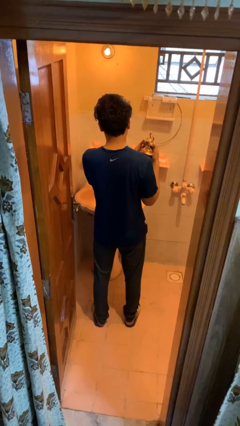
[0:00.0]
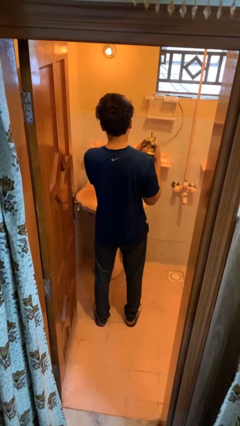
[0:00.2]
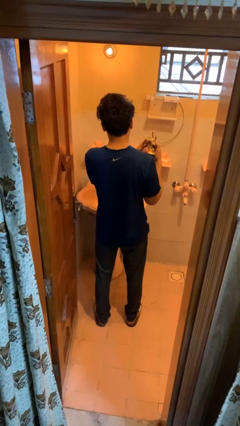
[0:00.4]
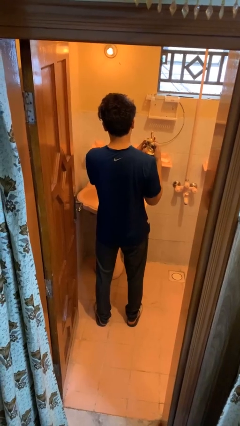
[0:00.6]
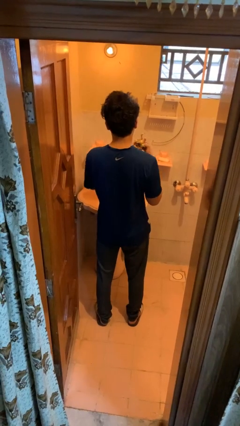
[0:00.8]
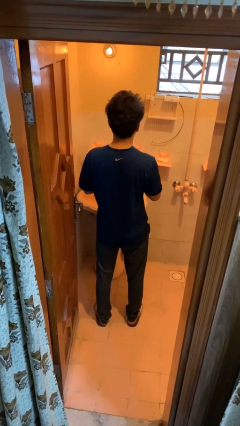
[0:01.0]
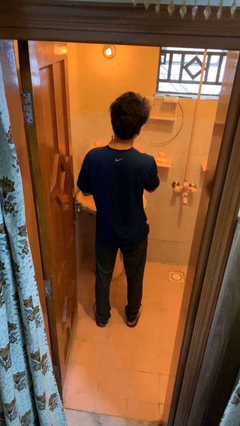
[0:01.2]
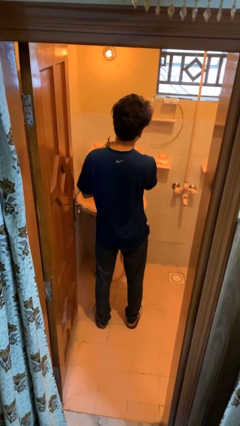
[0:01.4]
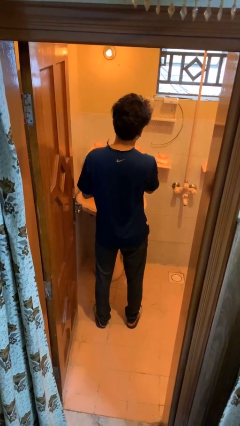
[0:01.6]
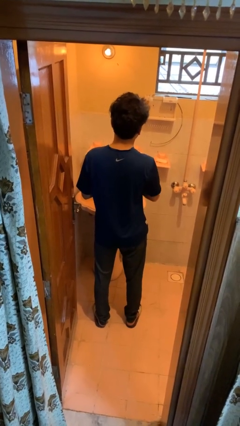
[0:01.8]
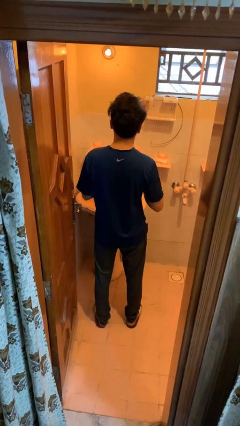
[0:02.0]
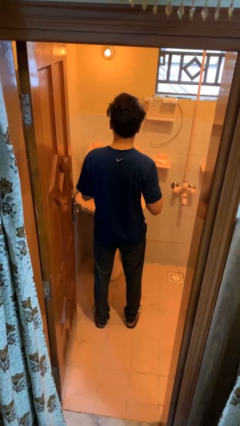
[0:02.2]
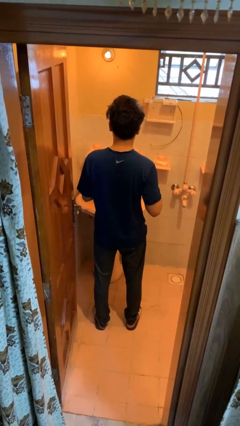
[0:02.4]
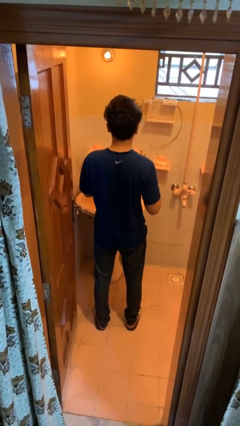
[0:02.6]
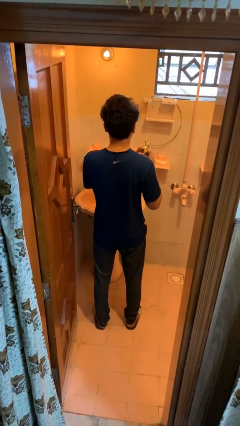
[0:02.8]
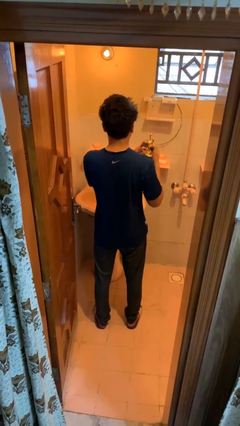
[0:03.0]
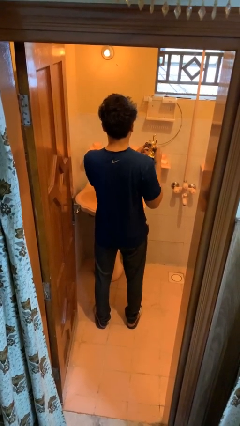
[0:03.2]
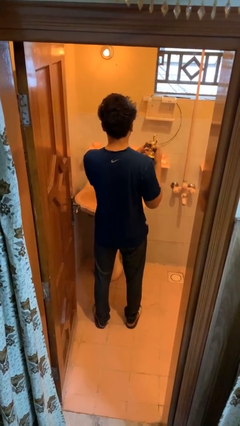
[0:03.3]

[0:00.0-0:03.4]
person applies deodorant

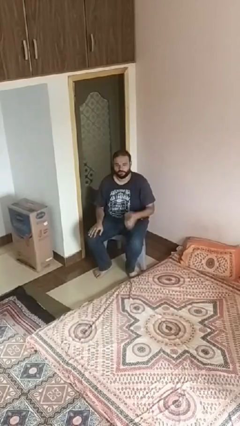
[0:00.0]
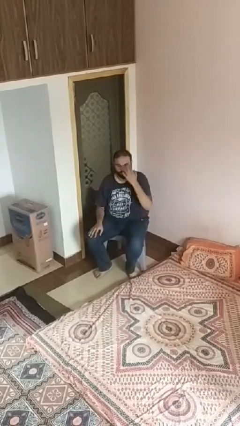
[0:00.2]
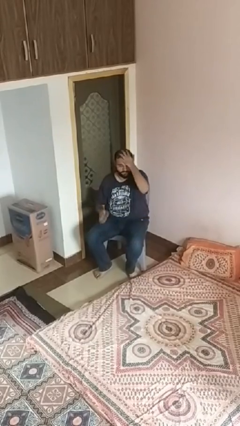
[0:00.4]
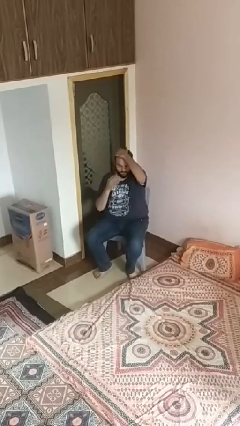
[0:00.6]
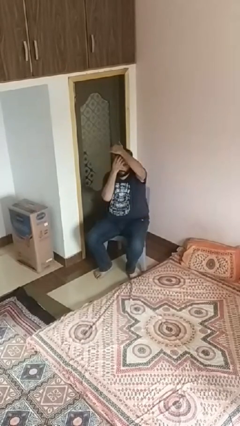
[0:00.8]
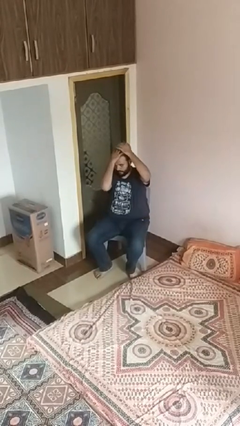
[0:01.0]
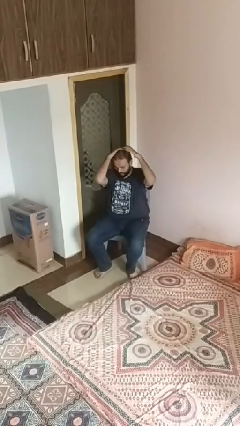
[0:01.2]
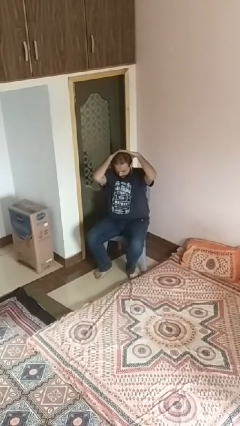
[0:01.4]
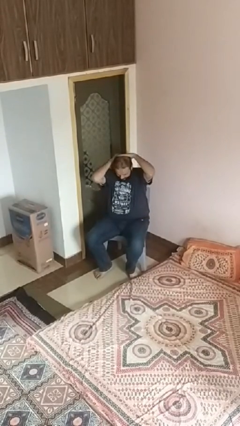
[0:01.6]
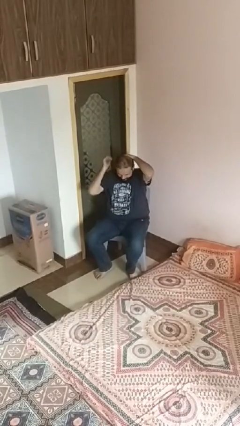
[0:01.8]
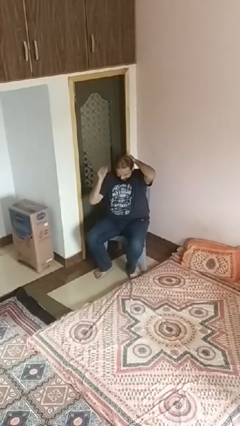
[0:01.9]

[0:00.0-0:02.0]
person strokes hair

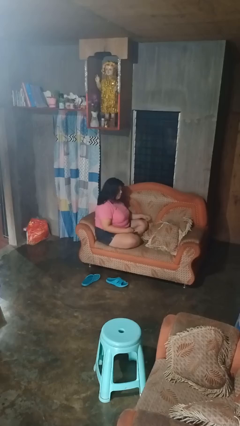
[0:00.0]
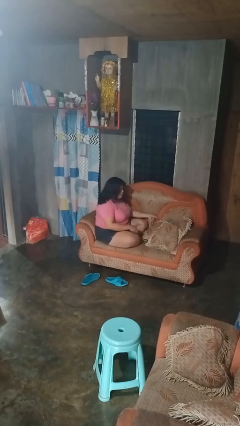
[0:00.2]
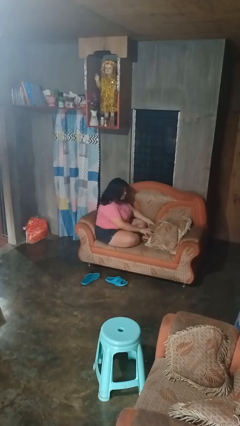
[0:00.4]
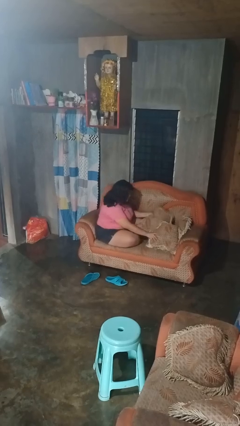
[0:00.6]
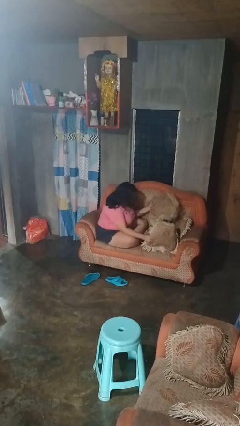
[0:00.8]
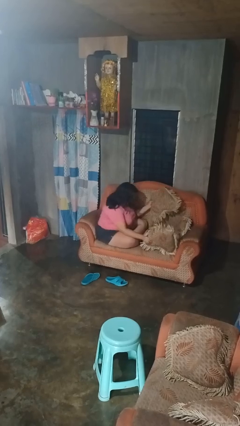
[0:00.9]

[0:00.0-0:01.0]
person searches in couch

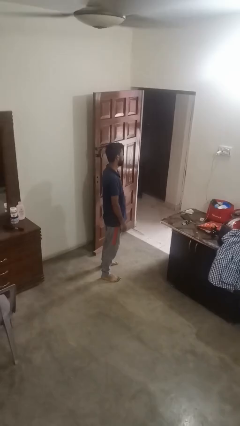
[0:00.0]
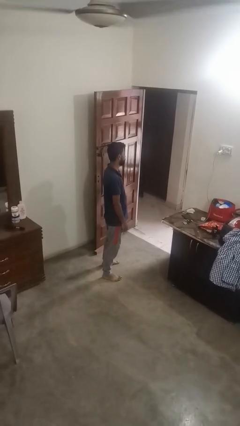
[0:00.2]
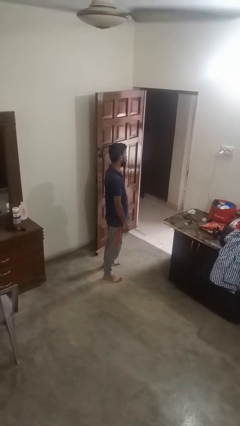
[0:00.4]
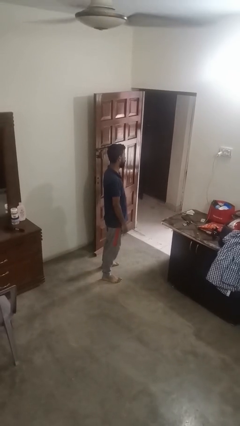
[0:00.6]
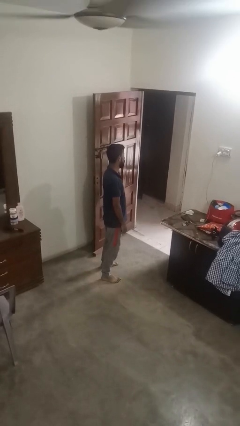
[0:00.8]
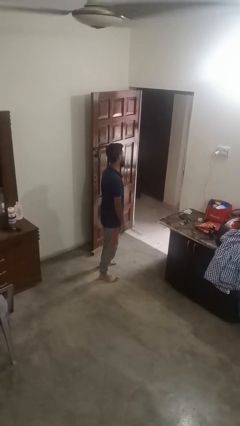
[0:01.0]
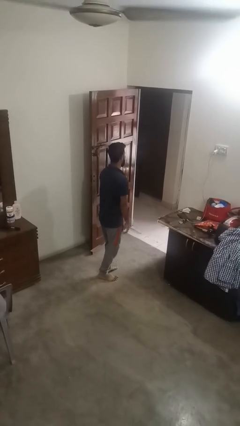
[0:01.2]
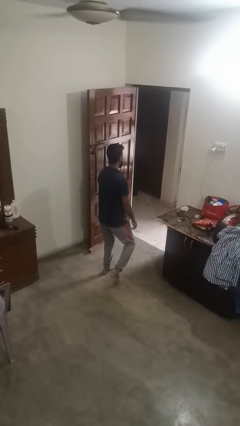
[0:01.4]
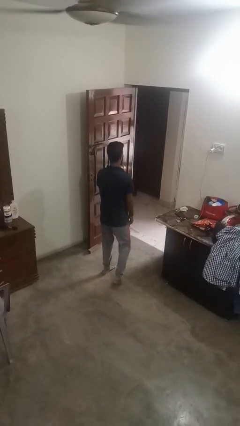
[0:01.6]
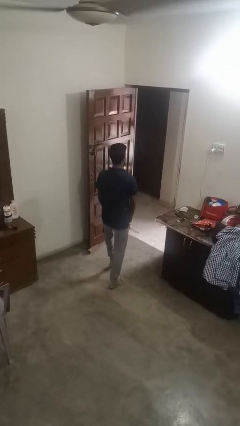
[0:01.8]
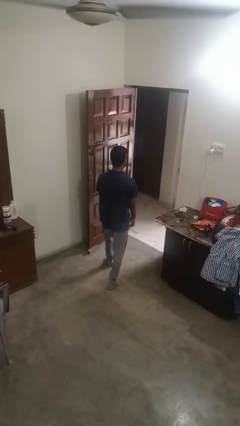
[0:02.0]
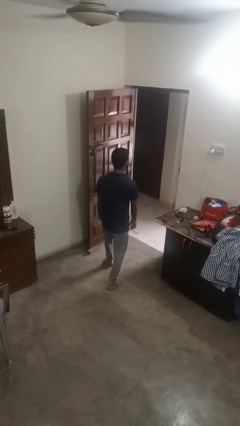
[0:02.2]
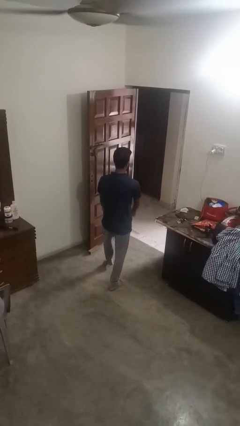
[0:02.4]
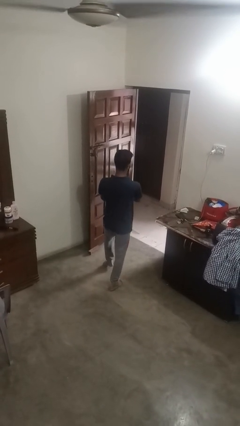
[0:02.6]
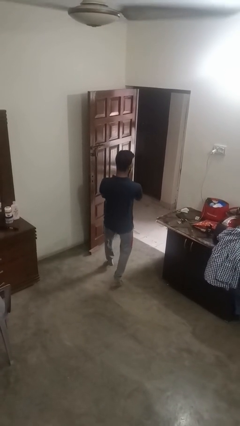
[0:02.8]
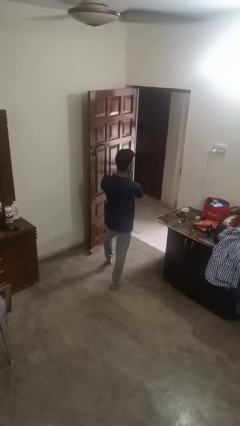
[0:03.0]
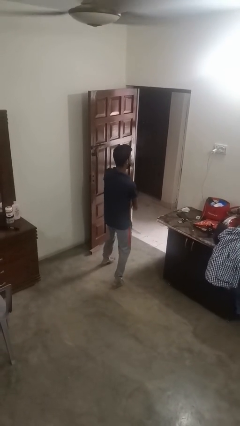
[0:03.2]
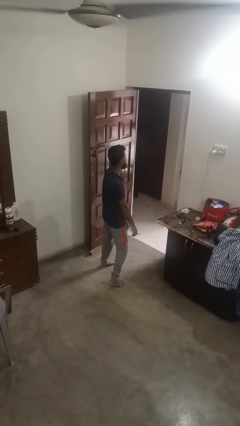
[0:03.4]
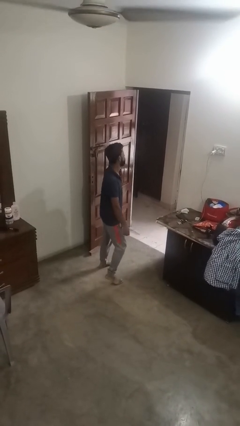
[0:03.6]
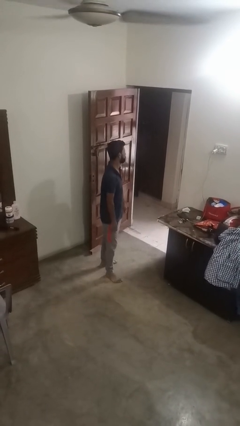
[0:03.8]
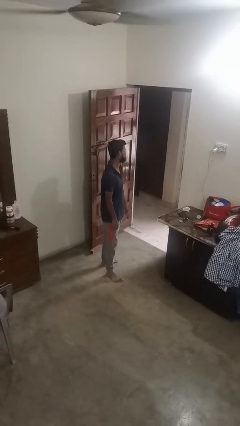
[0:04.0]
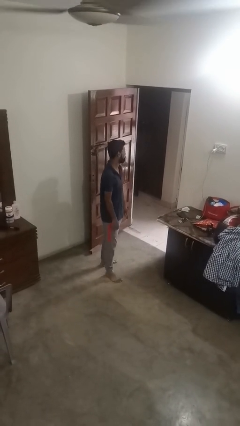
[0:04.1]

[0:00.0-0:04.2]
person dances in place

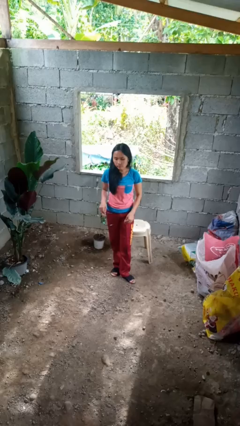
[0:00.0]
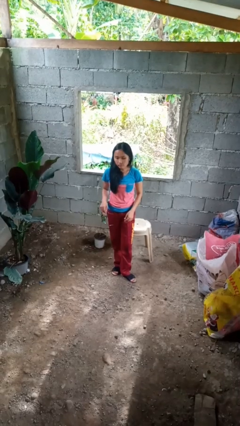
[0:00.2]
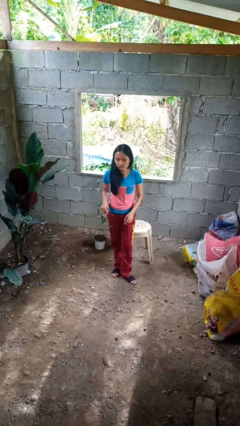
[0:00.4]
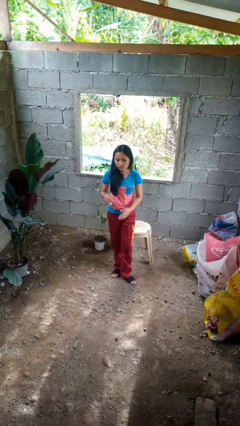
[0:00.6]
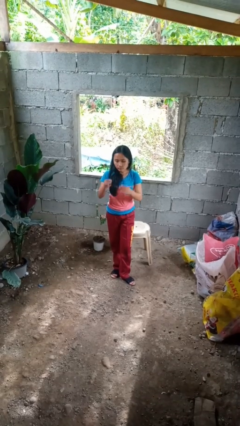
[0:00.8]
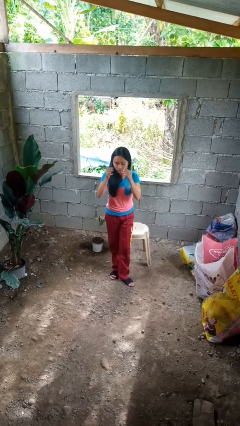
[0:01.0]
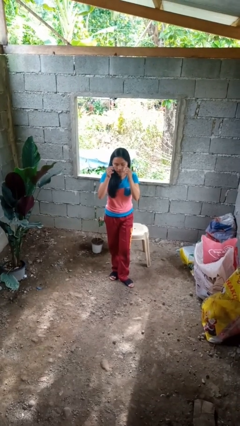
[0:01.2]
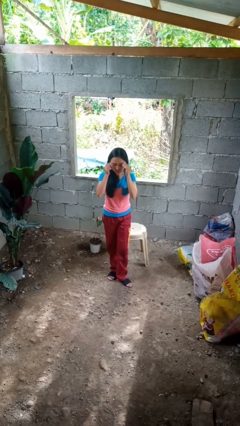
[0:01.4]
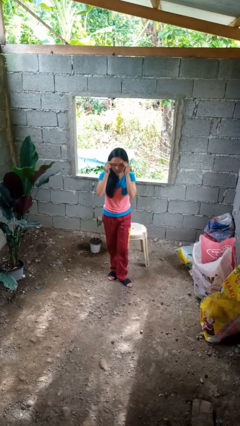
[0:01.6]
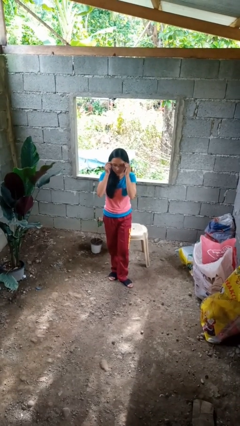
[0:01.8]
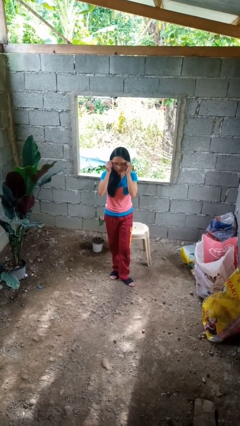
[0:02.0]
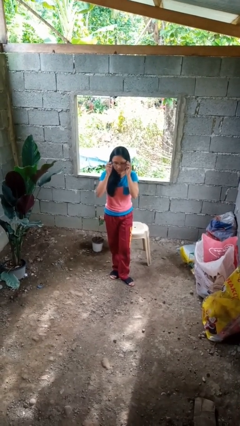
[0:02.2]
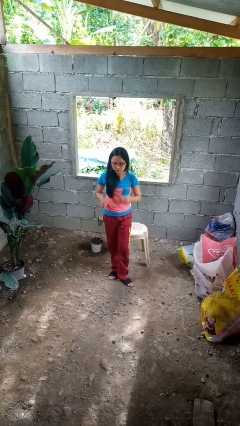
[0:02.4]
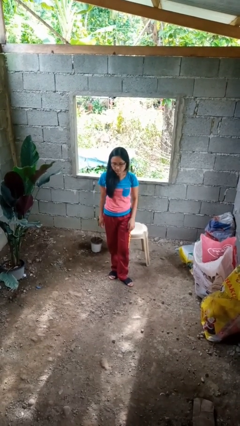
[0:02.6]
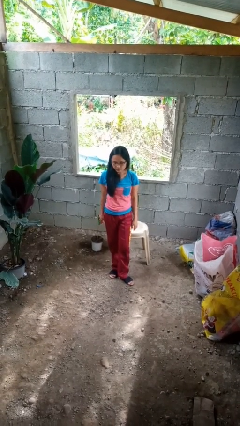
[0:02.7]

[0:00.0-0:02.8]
person puts on glasses

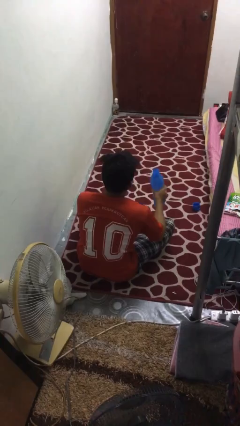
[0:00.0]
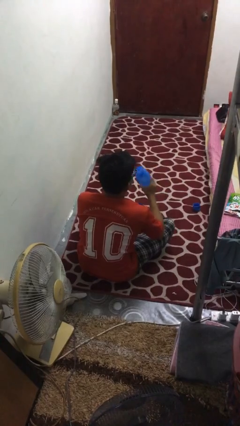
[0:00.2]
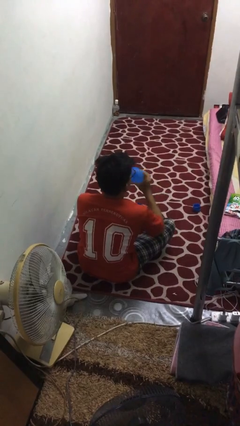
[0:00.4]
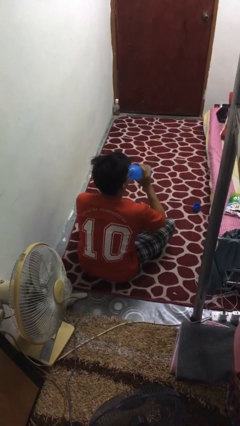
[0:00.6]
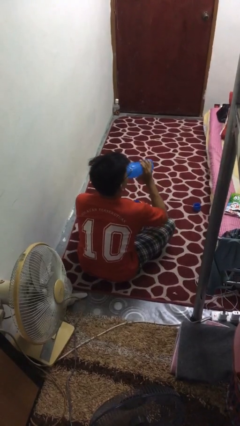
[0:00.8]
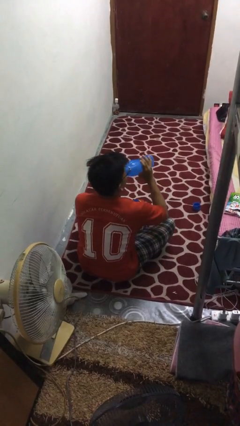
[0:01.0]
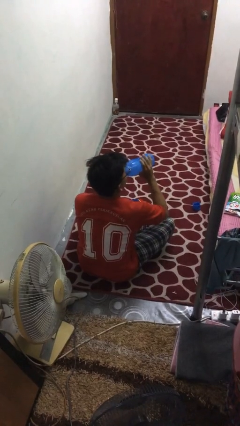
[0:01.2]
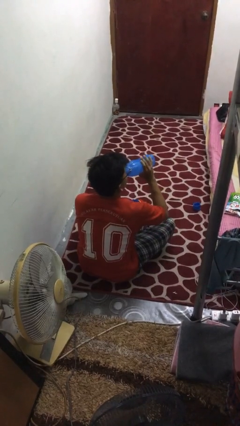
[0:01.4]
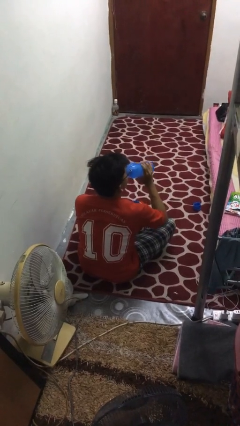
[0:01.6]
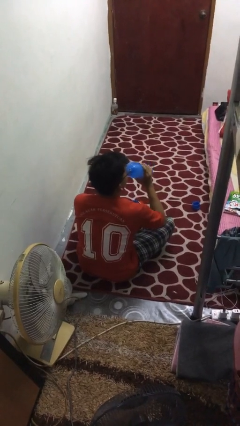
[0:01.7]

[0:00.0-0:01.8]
person drinks from bottle

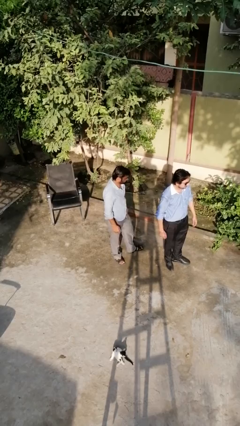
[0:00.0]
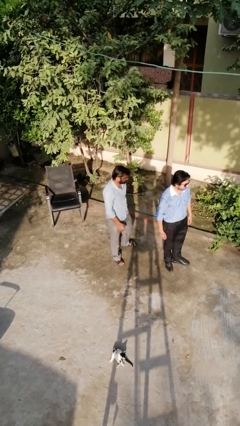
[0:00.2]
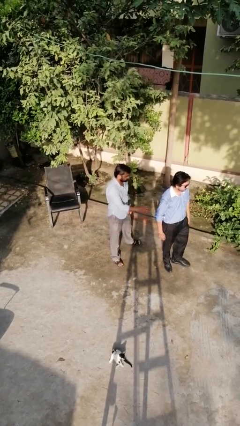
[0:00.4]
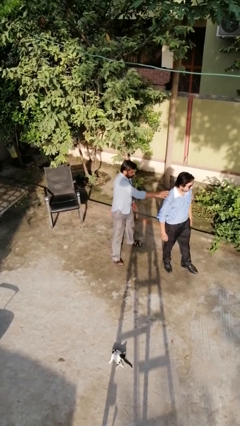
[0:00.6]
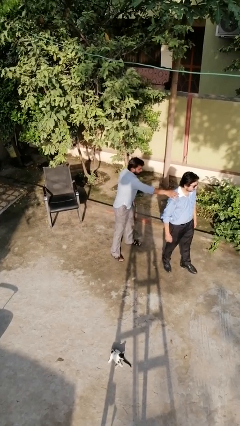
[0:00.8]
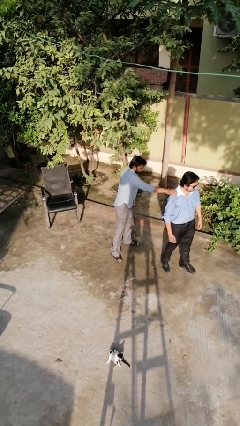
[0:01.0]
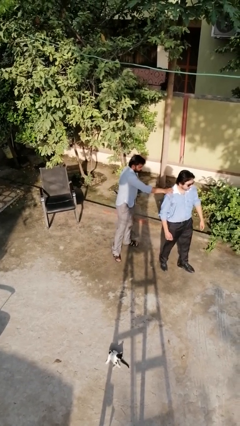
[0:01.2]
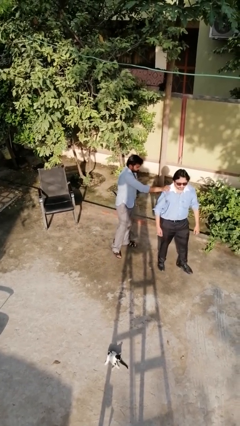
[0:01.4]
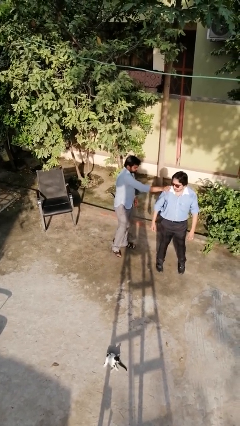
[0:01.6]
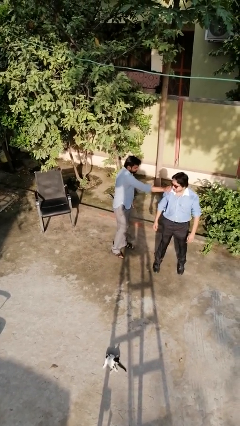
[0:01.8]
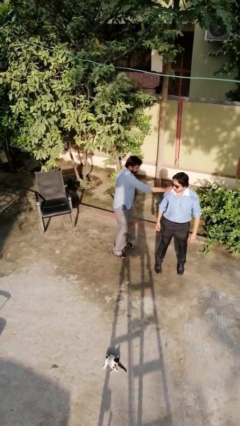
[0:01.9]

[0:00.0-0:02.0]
person grabs person by shoulder

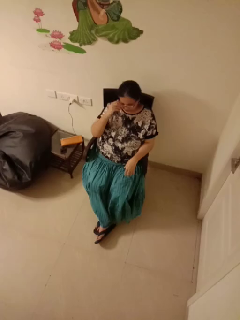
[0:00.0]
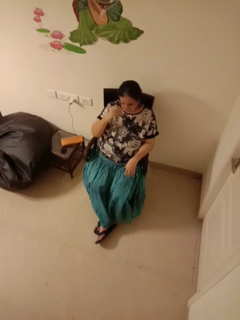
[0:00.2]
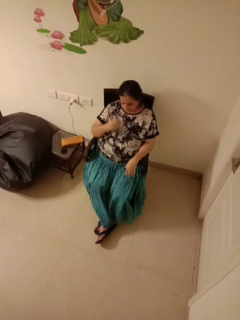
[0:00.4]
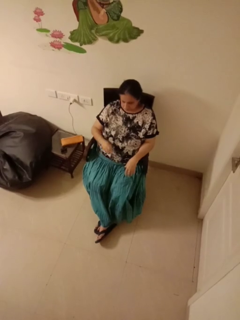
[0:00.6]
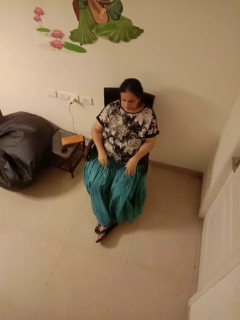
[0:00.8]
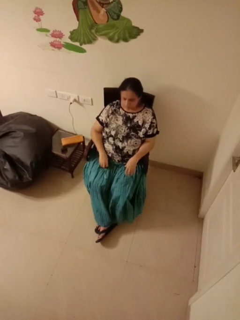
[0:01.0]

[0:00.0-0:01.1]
person takes off glasses
